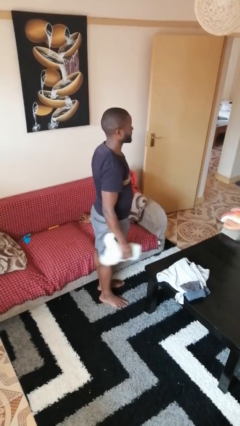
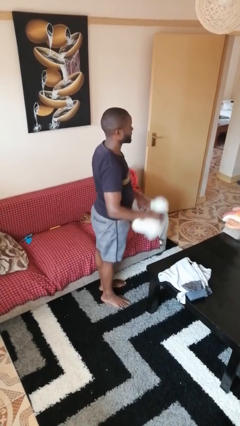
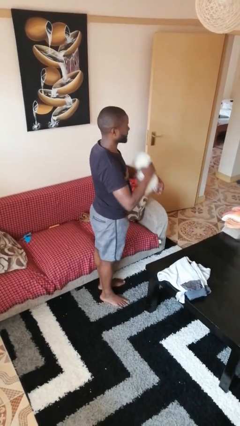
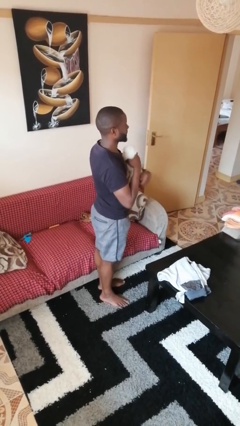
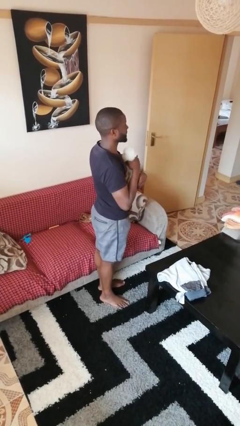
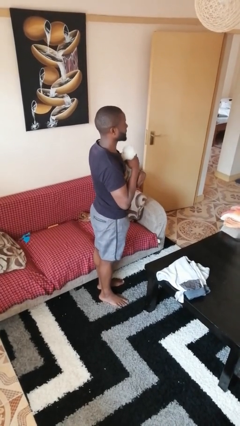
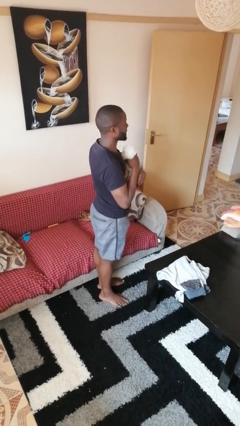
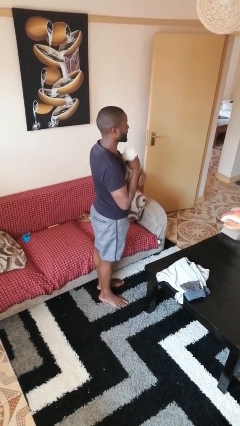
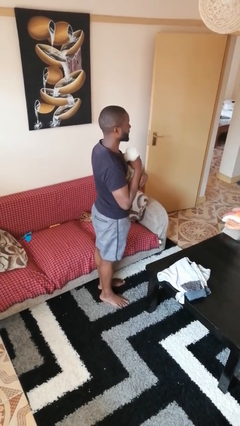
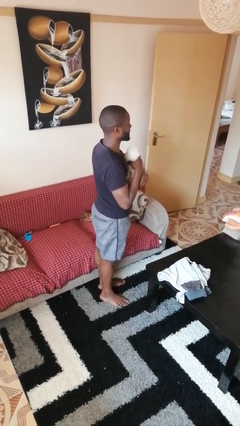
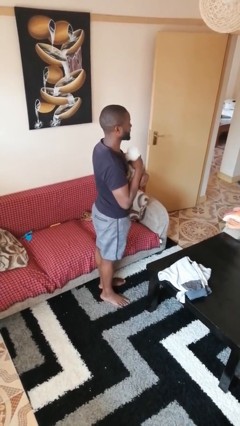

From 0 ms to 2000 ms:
person hugs stuffed animal

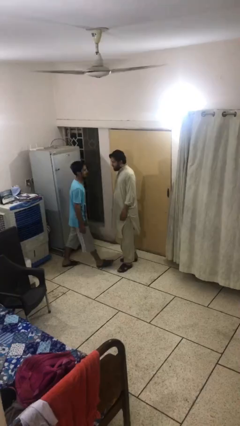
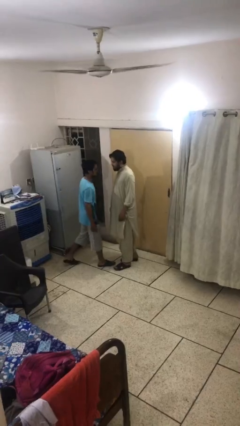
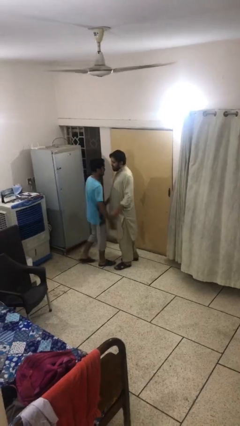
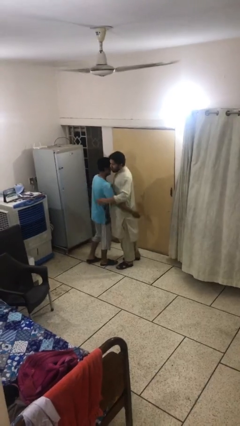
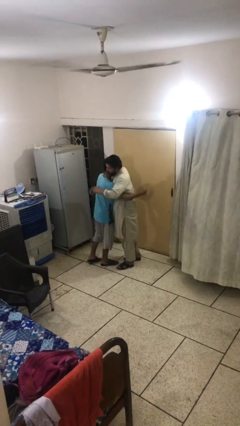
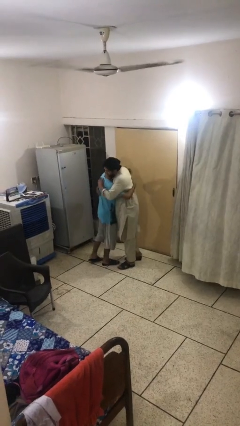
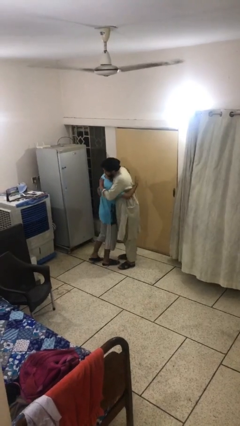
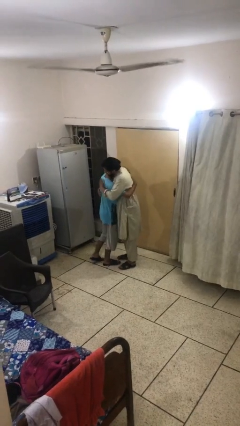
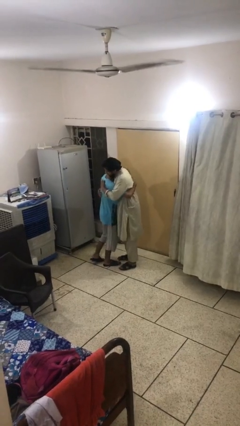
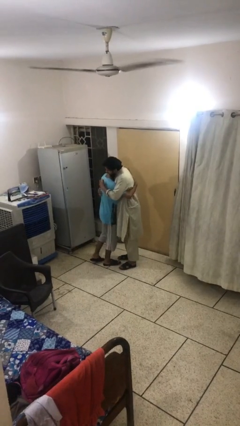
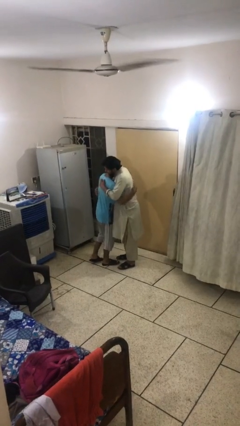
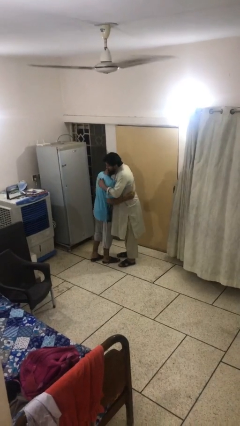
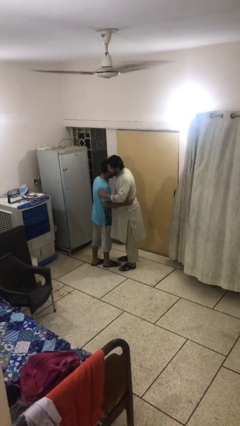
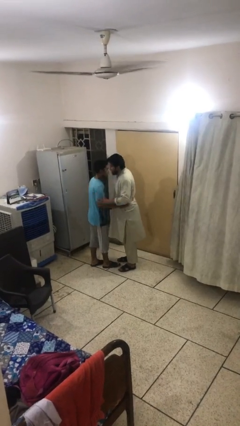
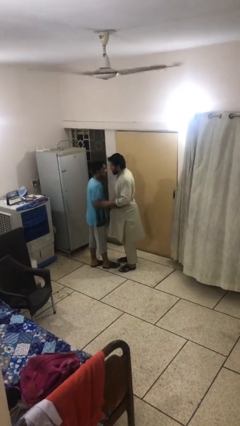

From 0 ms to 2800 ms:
person embraces person

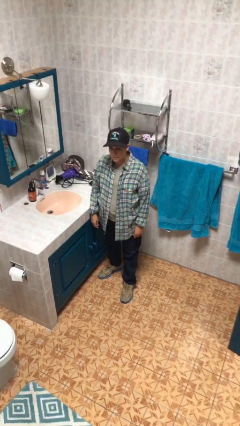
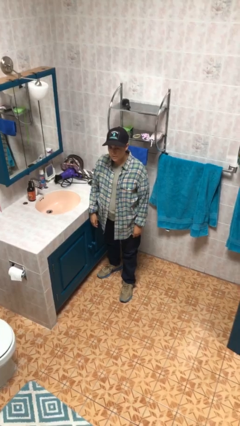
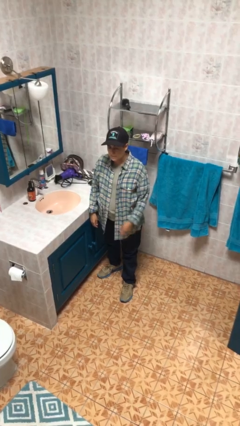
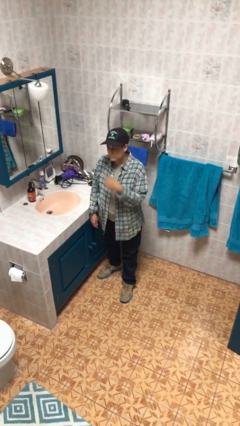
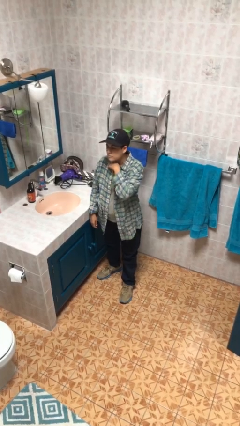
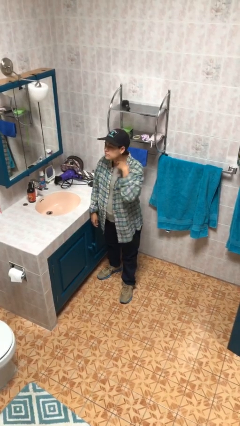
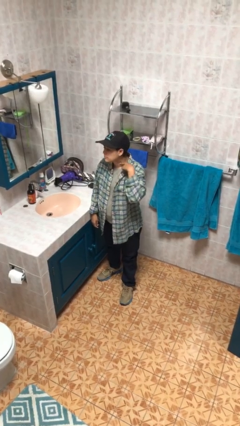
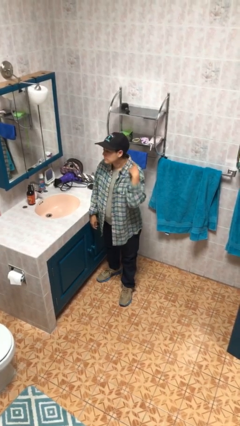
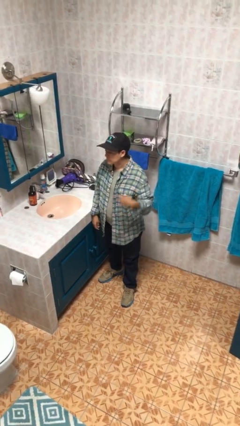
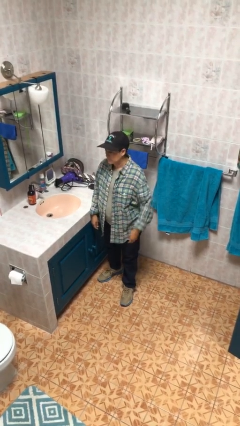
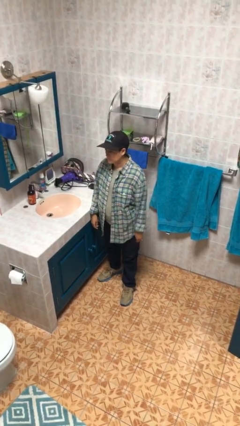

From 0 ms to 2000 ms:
person gestures cut

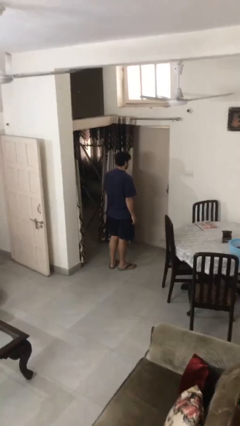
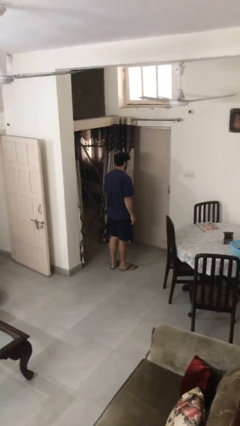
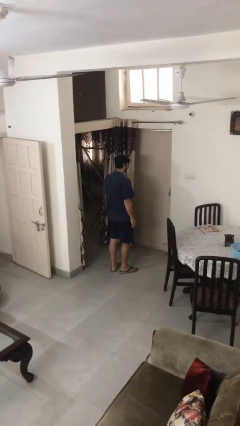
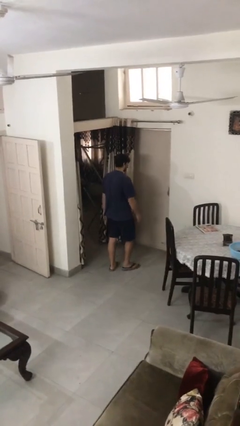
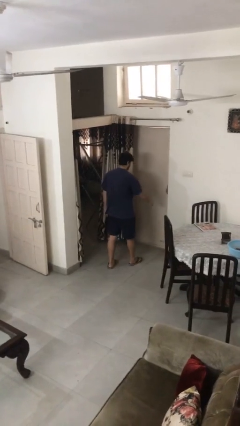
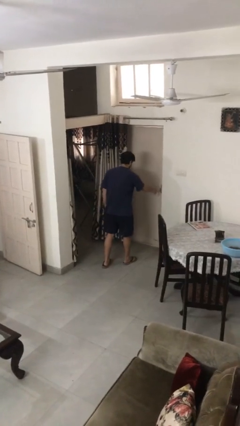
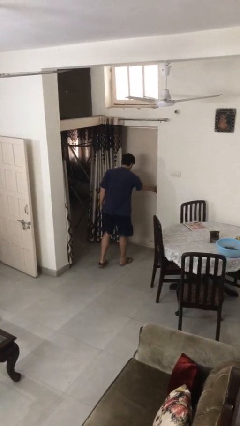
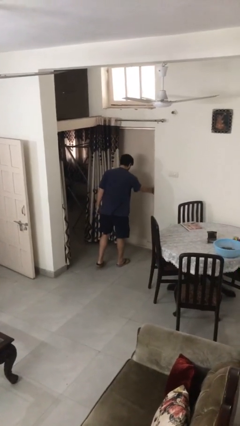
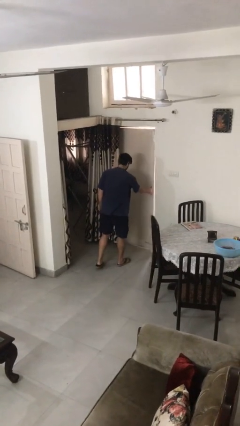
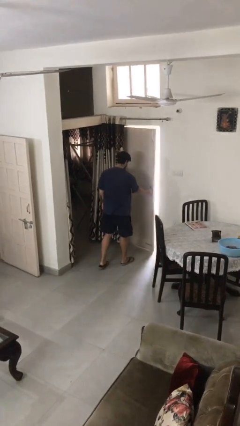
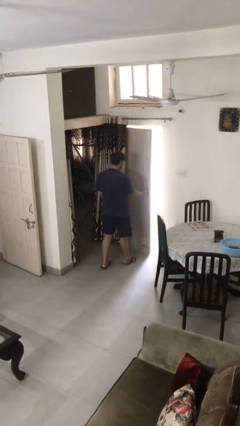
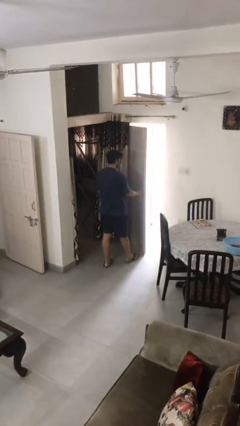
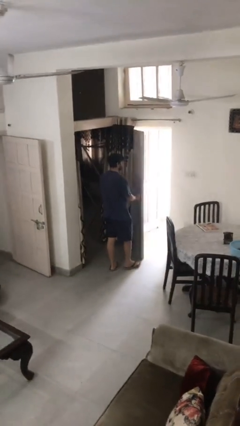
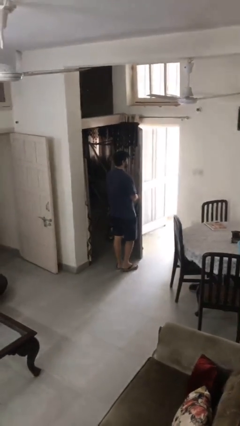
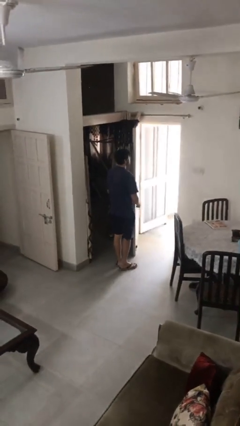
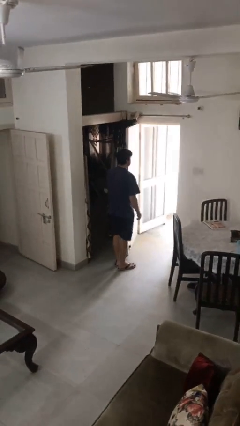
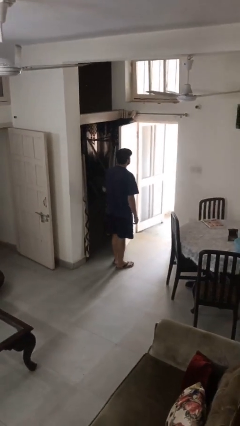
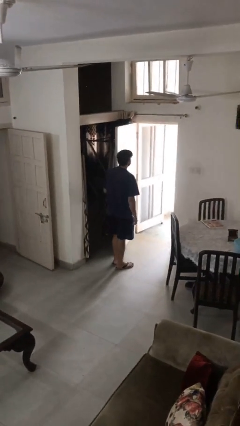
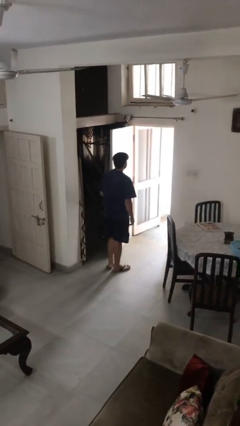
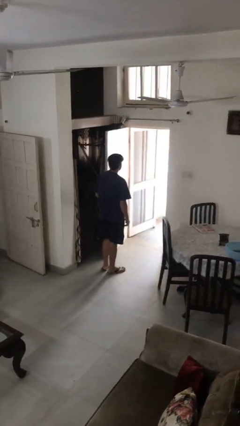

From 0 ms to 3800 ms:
person opens facility door

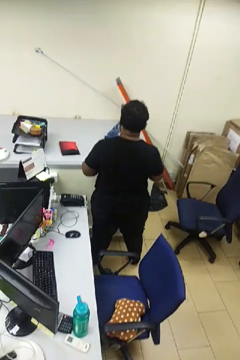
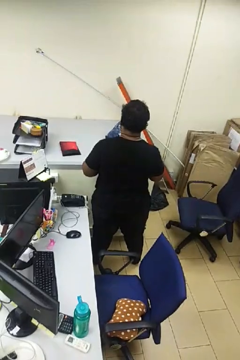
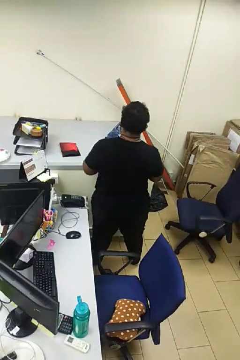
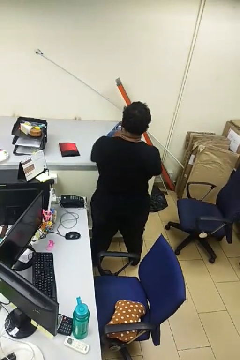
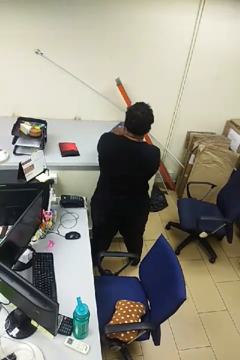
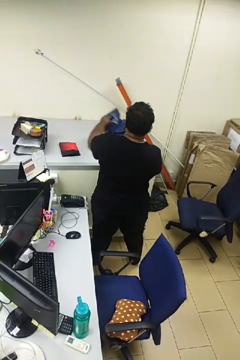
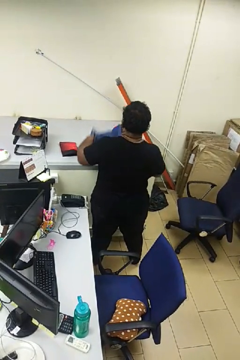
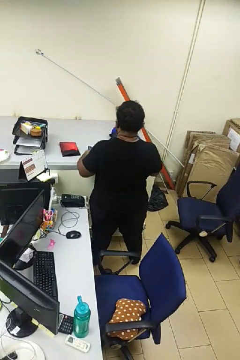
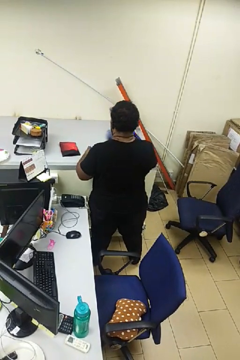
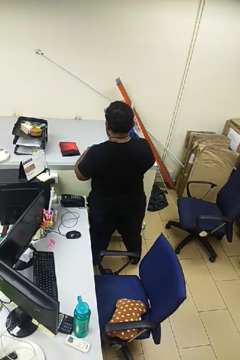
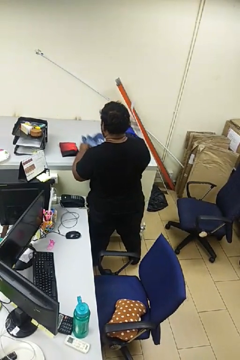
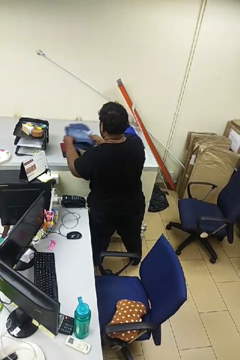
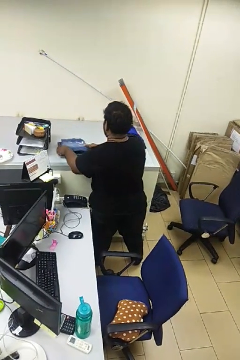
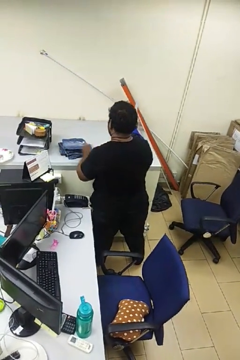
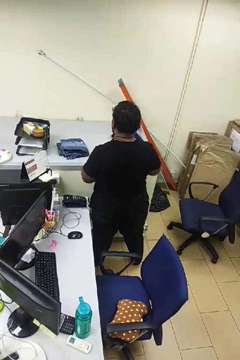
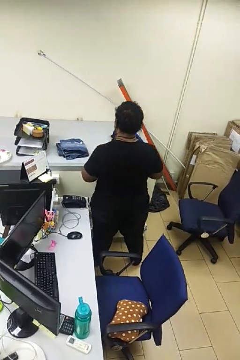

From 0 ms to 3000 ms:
person folds pants

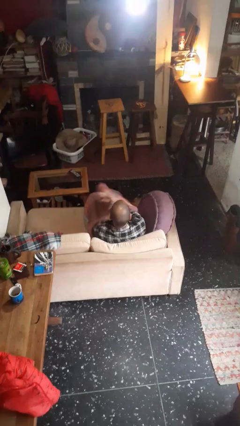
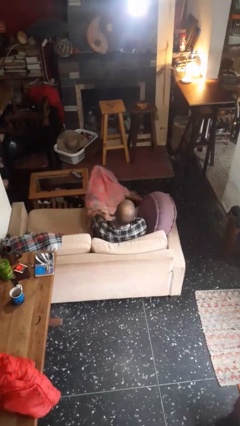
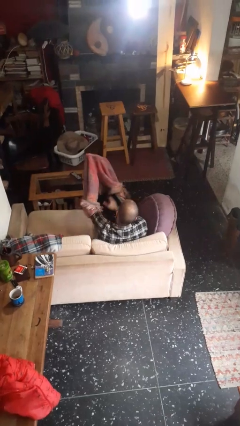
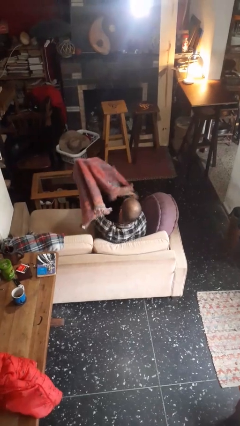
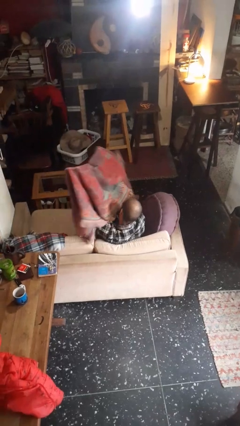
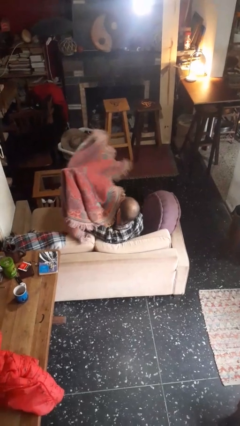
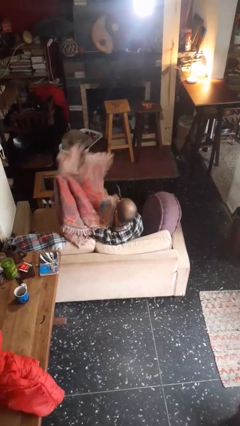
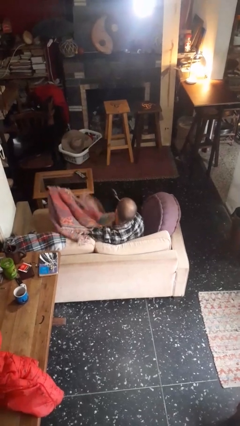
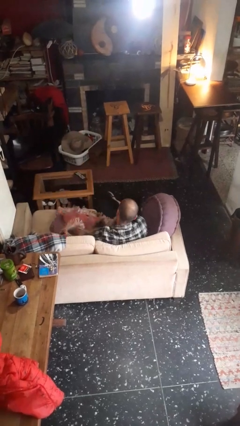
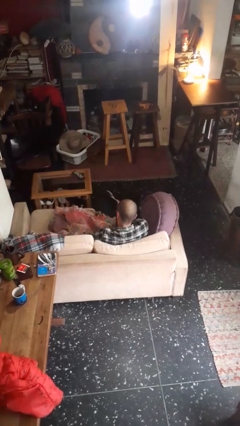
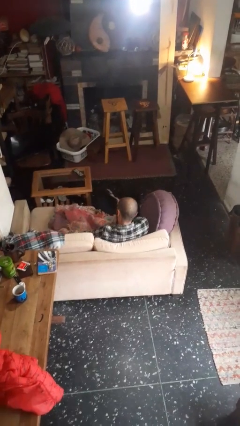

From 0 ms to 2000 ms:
person uncovers with blanket

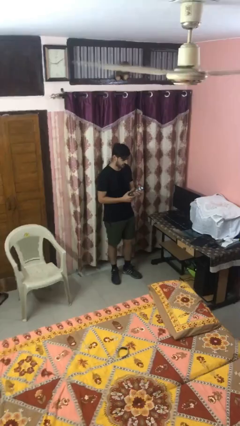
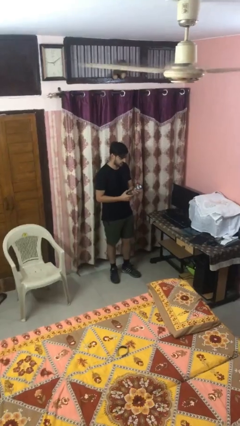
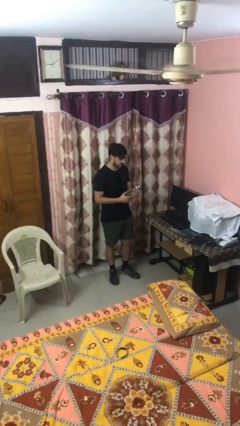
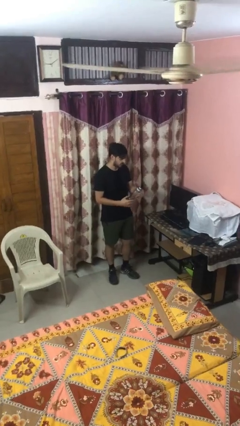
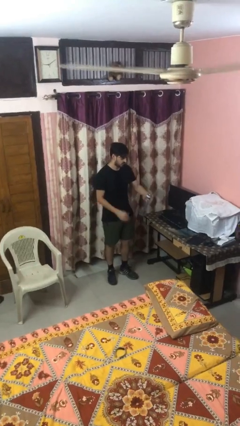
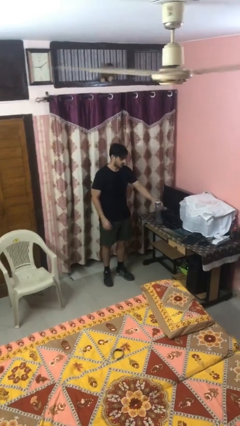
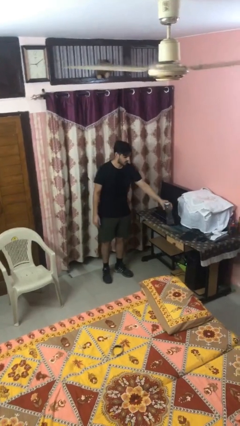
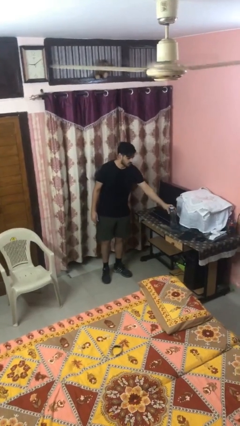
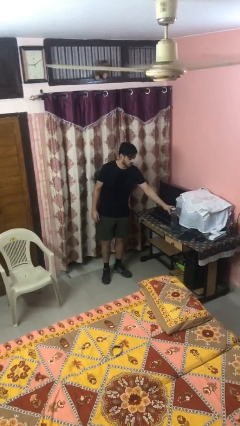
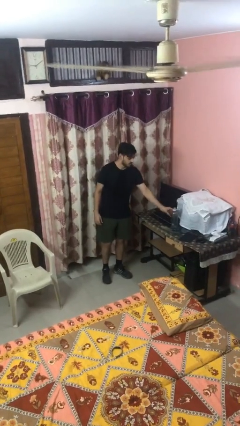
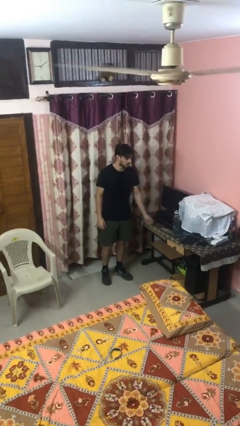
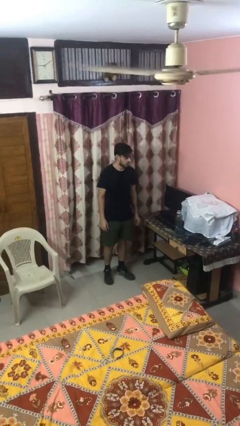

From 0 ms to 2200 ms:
person puts down object on countertop
